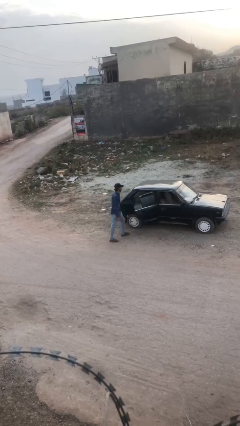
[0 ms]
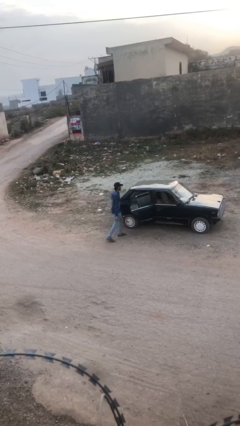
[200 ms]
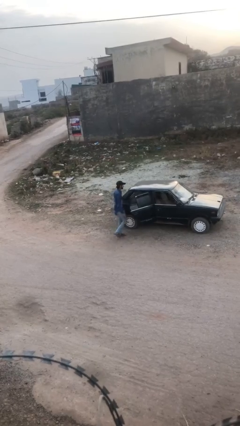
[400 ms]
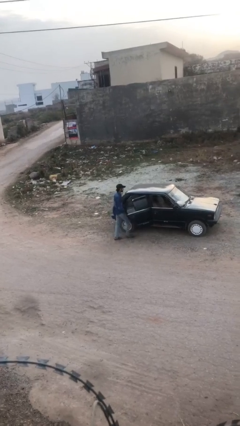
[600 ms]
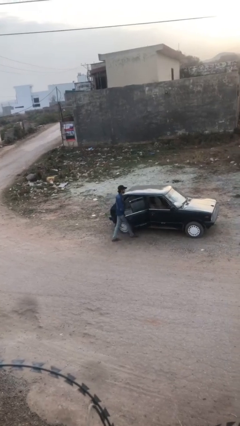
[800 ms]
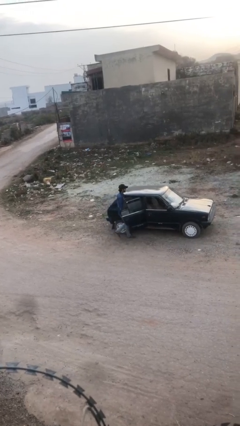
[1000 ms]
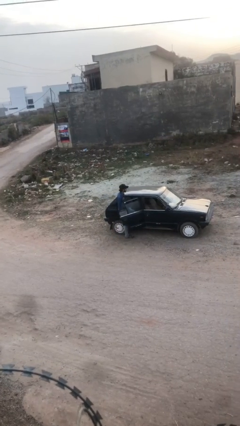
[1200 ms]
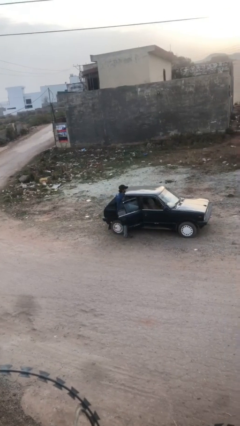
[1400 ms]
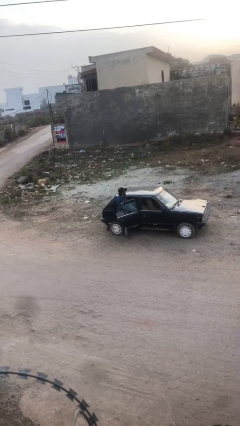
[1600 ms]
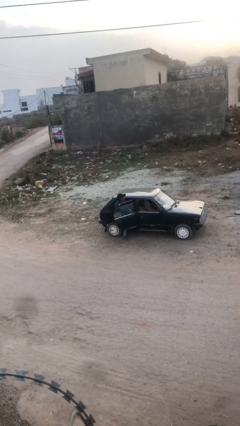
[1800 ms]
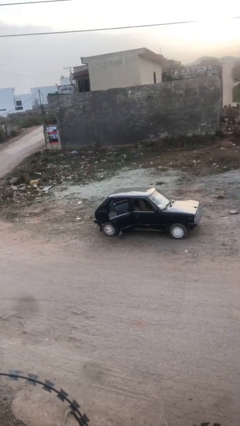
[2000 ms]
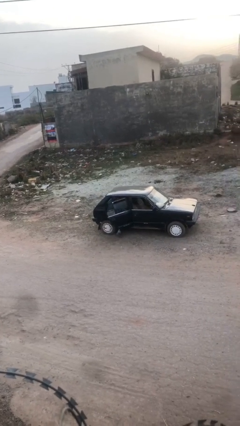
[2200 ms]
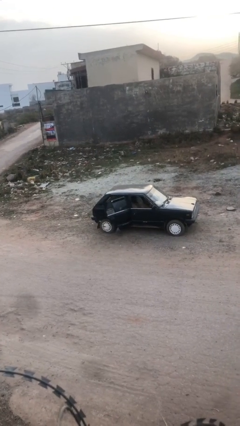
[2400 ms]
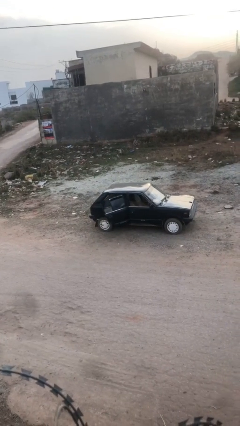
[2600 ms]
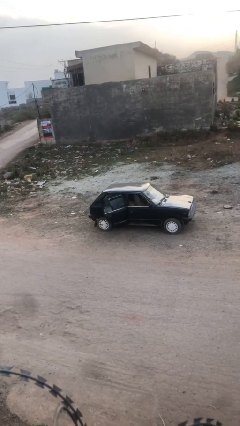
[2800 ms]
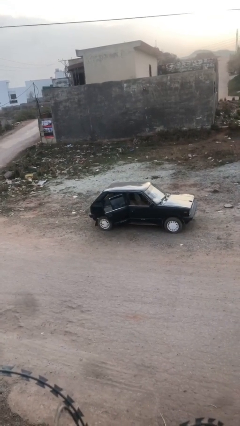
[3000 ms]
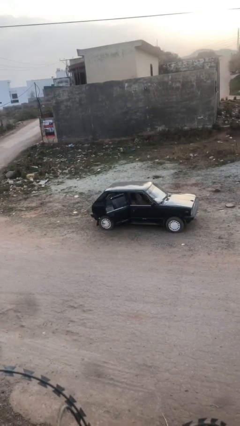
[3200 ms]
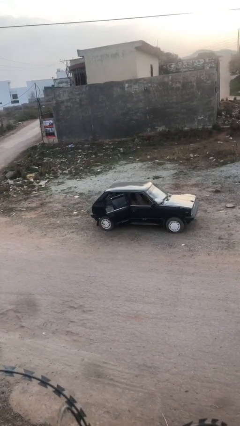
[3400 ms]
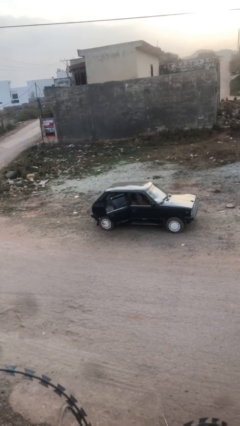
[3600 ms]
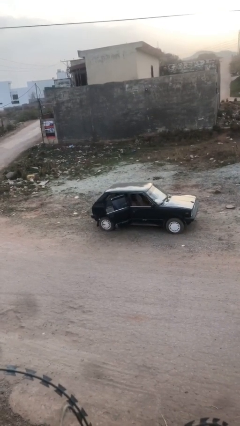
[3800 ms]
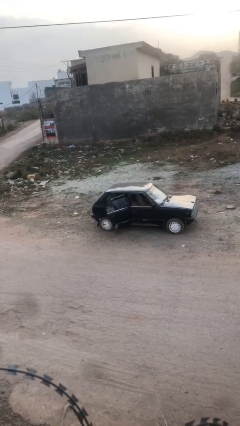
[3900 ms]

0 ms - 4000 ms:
person enters car

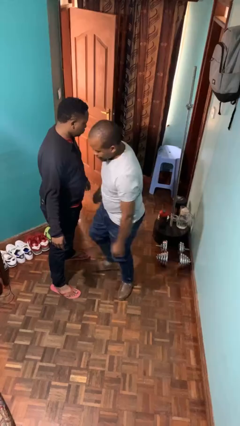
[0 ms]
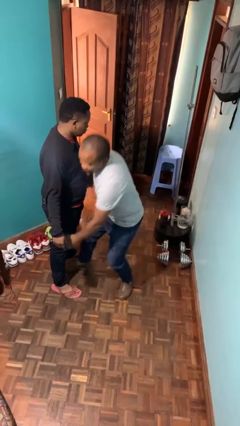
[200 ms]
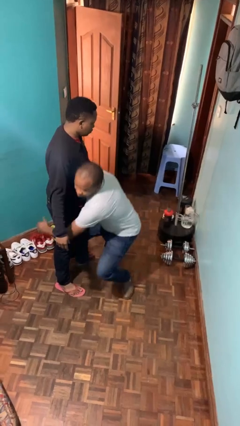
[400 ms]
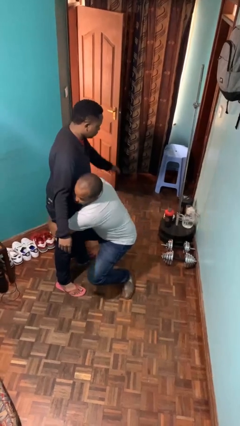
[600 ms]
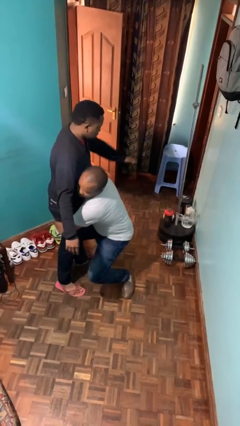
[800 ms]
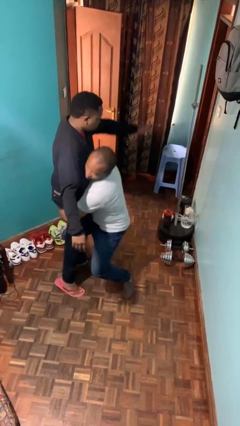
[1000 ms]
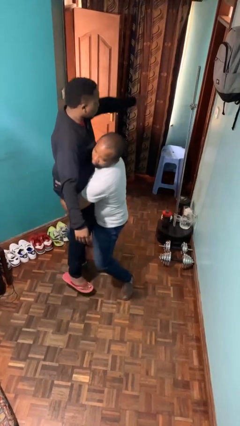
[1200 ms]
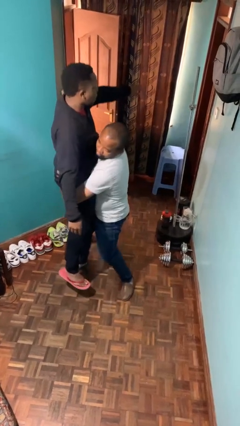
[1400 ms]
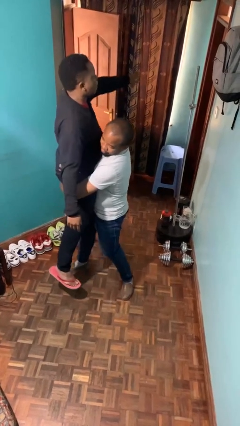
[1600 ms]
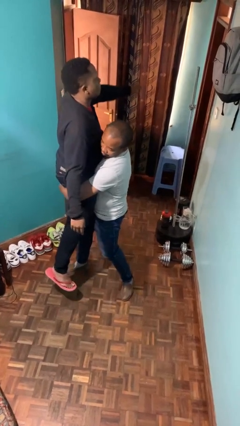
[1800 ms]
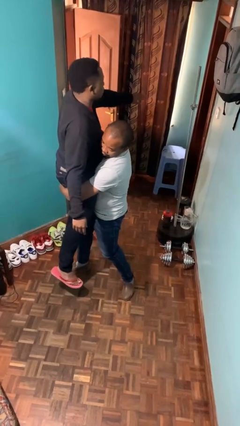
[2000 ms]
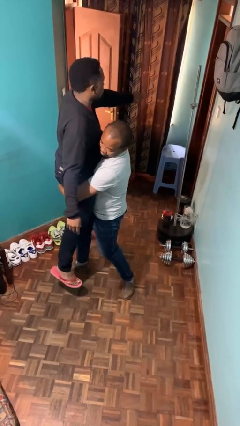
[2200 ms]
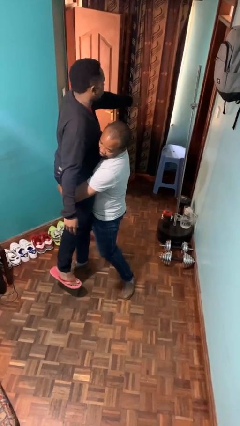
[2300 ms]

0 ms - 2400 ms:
person picks up person

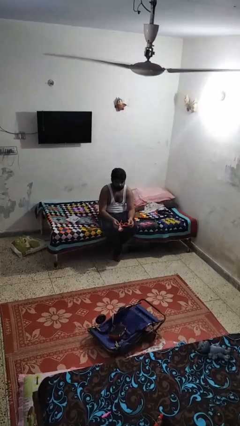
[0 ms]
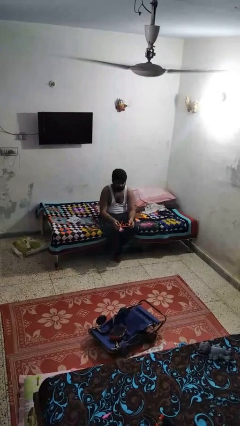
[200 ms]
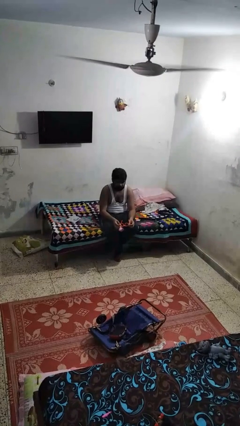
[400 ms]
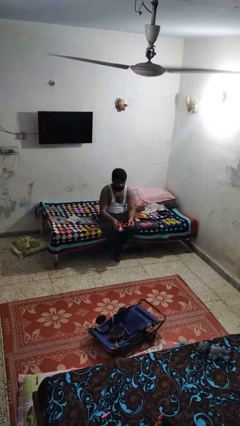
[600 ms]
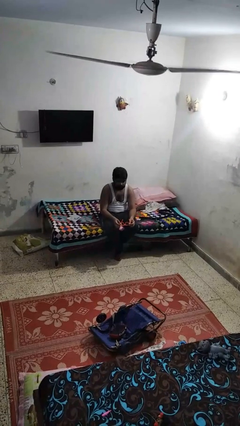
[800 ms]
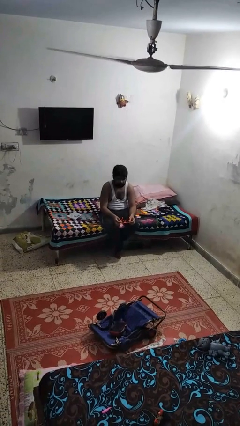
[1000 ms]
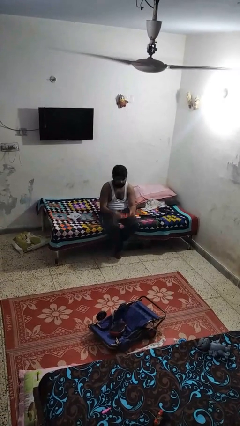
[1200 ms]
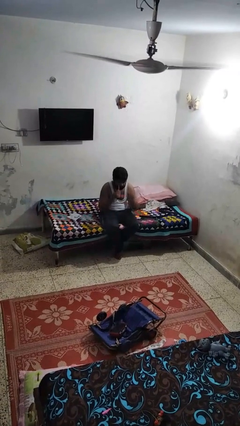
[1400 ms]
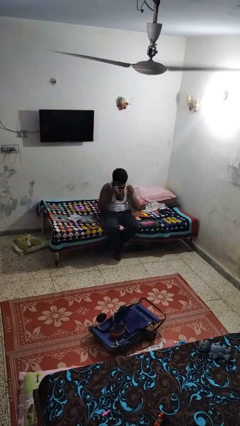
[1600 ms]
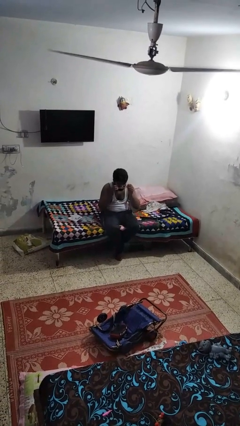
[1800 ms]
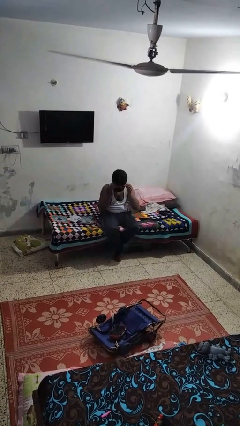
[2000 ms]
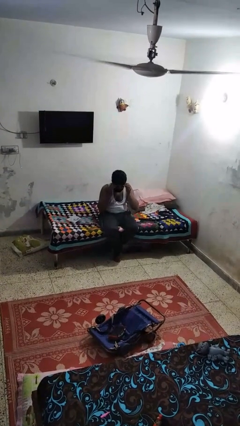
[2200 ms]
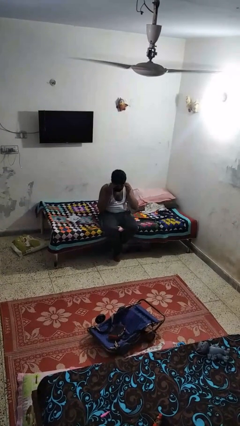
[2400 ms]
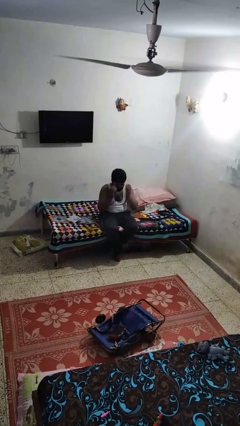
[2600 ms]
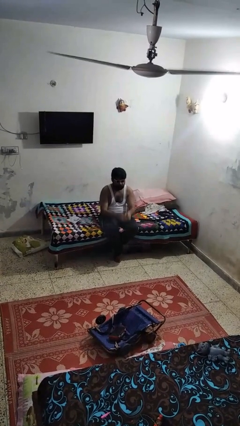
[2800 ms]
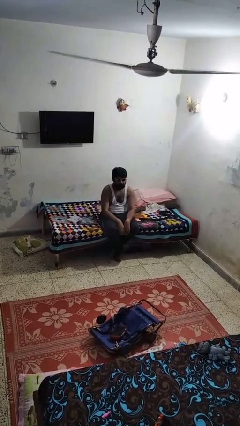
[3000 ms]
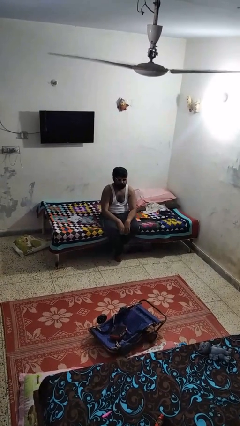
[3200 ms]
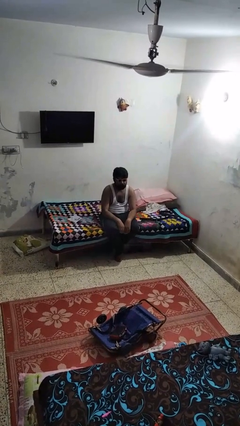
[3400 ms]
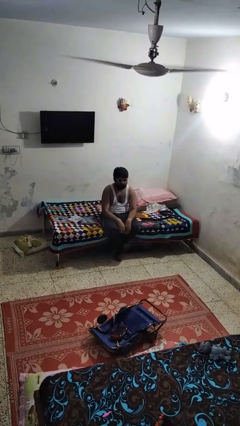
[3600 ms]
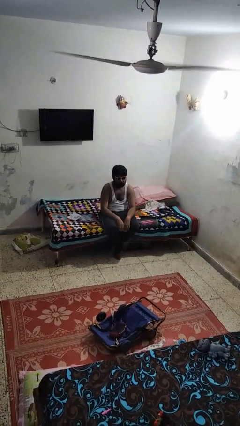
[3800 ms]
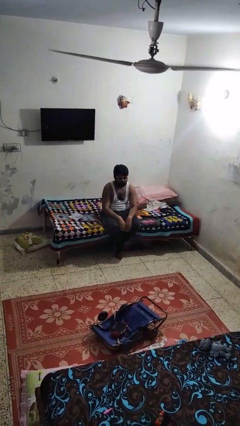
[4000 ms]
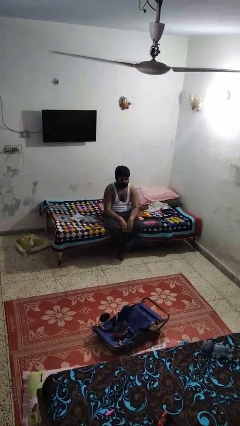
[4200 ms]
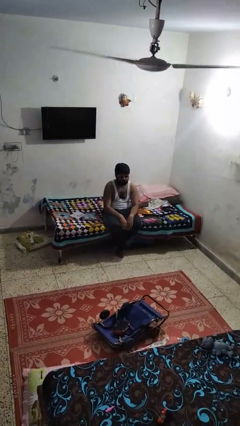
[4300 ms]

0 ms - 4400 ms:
person puts on sunglasses

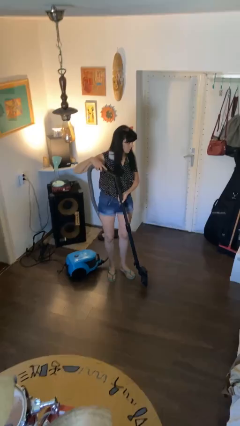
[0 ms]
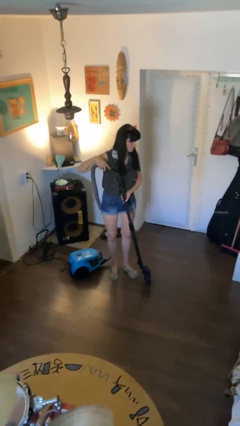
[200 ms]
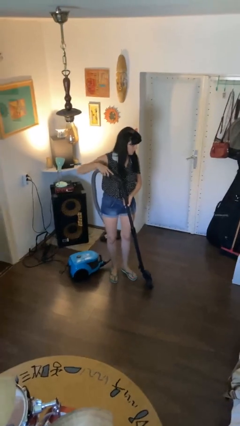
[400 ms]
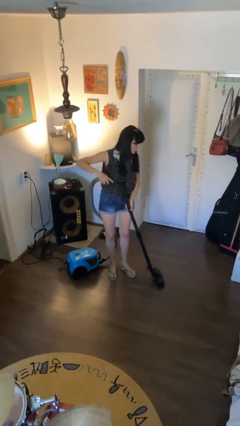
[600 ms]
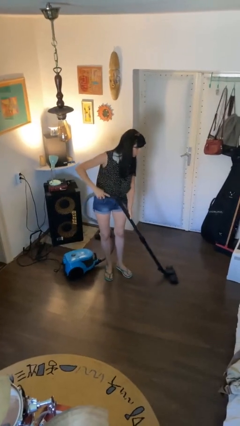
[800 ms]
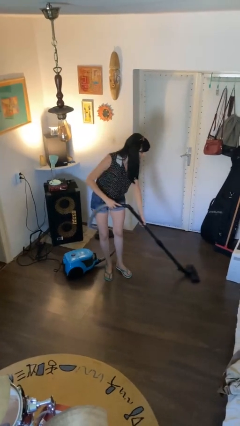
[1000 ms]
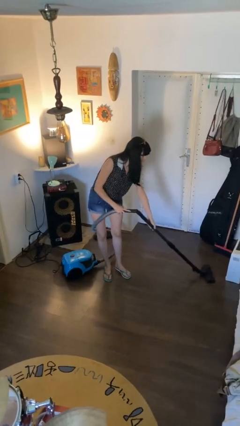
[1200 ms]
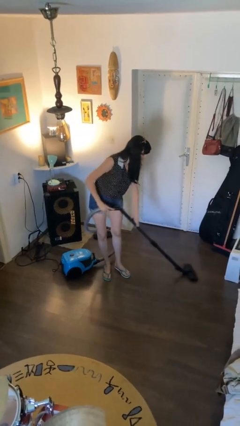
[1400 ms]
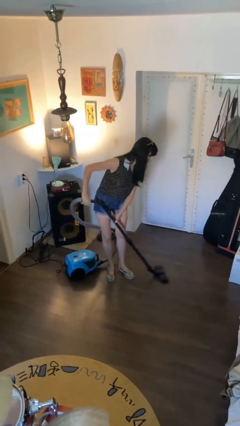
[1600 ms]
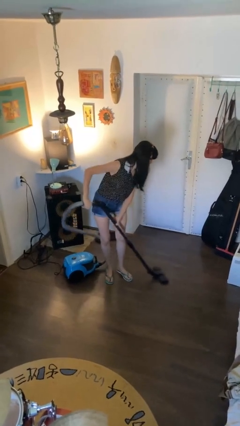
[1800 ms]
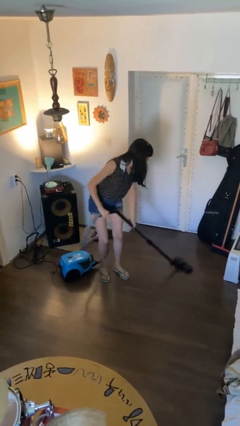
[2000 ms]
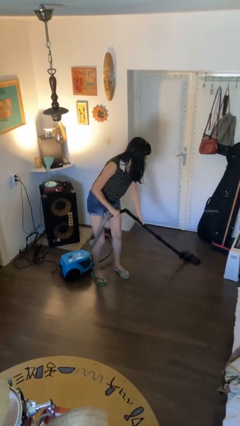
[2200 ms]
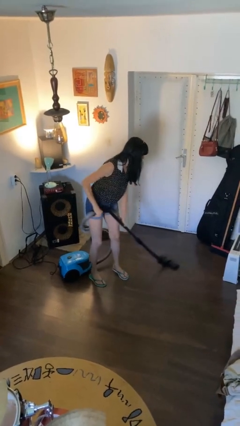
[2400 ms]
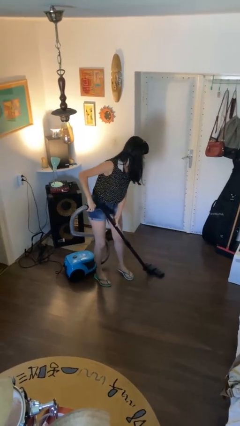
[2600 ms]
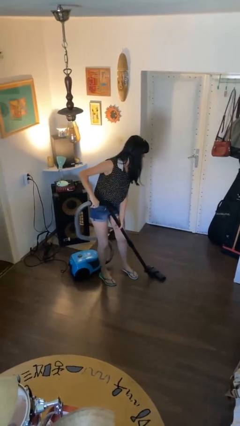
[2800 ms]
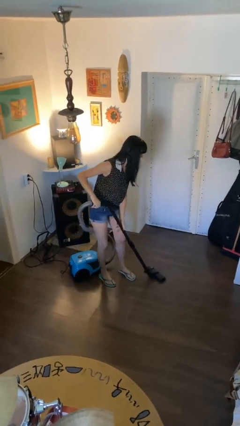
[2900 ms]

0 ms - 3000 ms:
person vacuums carpet

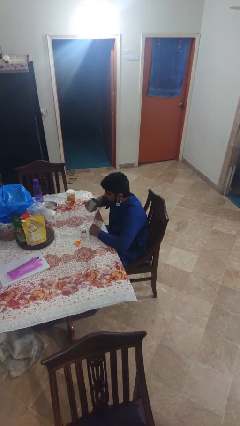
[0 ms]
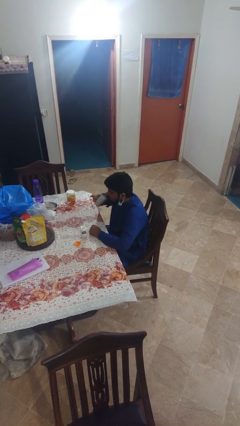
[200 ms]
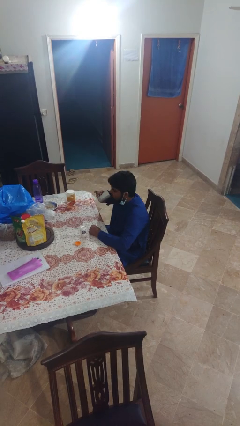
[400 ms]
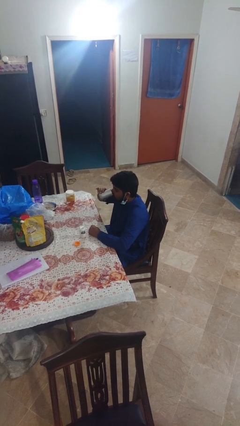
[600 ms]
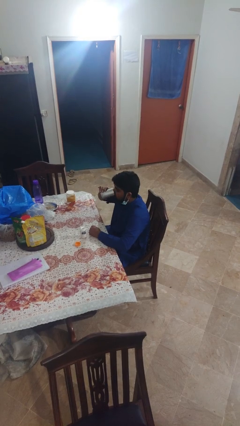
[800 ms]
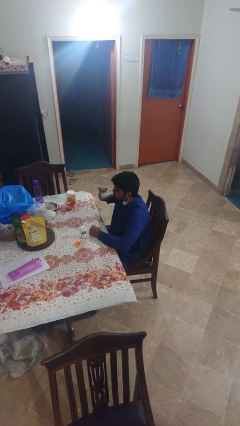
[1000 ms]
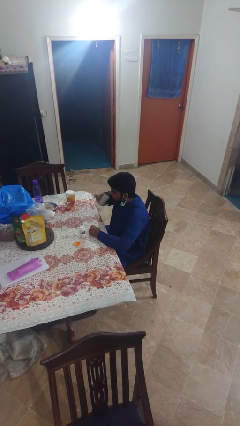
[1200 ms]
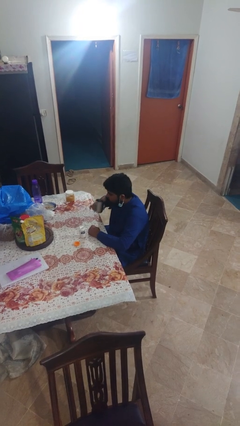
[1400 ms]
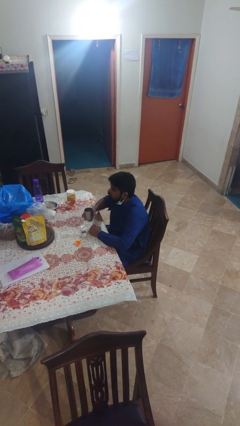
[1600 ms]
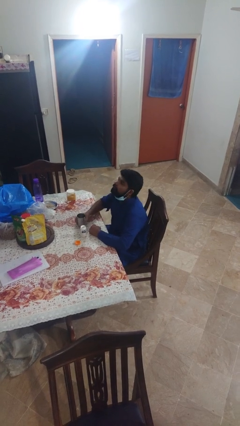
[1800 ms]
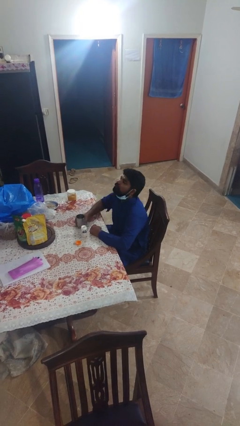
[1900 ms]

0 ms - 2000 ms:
person drinks from cup

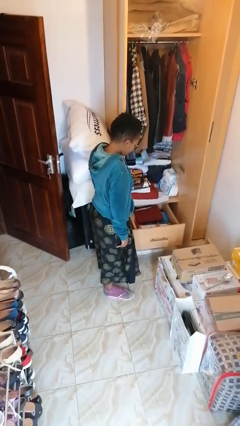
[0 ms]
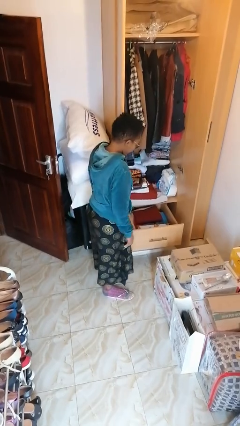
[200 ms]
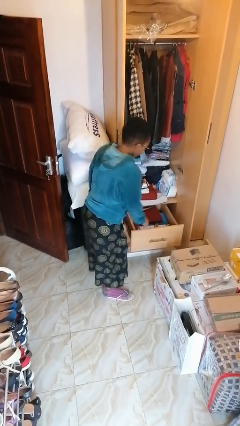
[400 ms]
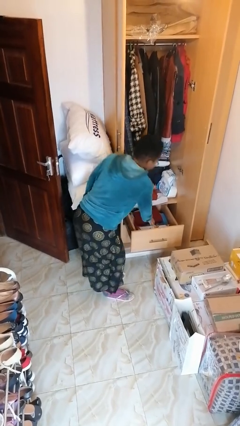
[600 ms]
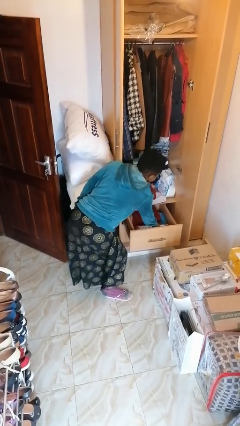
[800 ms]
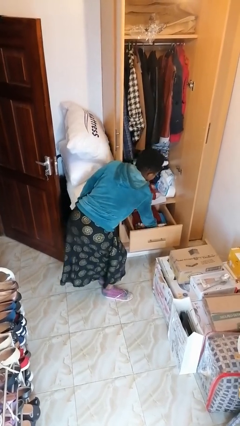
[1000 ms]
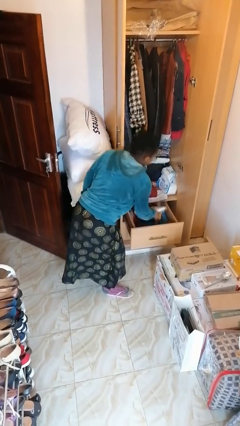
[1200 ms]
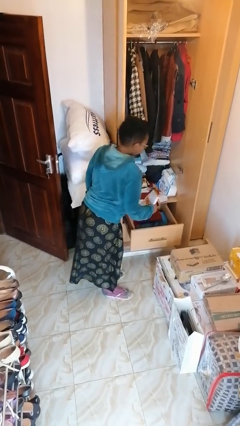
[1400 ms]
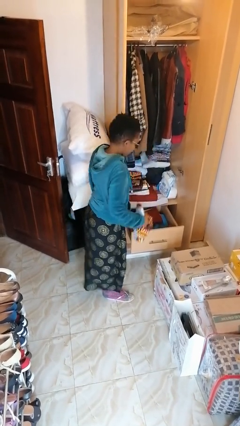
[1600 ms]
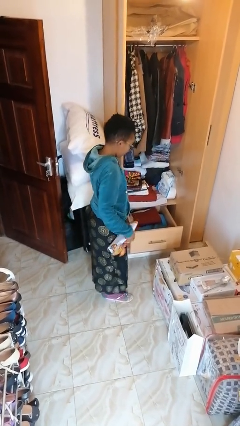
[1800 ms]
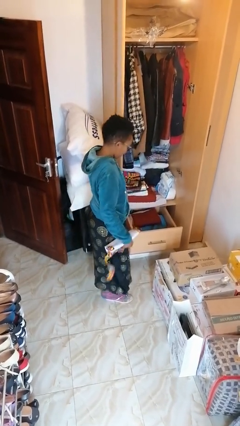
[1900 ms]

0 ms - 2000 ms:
person takes clothes from dresser
